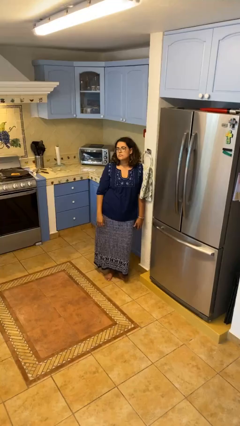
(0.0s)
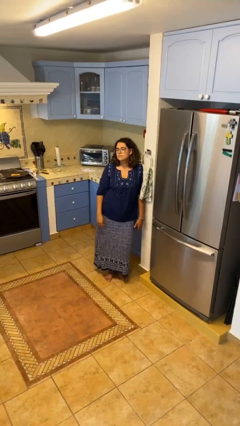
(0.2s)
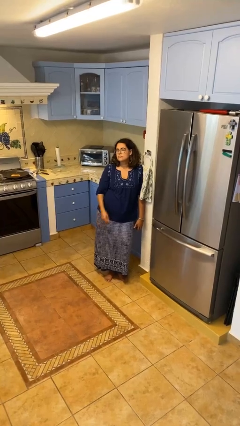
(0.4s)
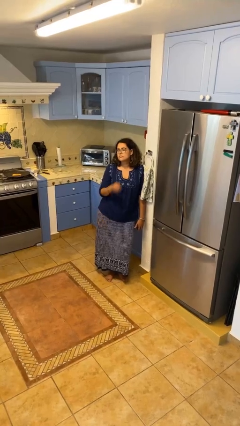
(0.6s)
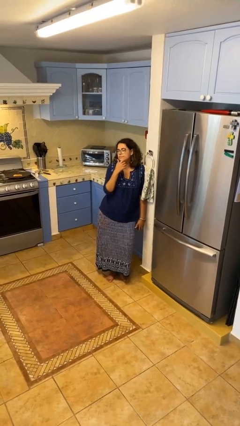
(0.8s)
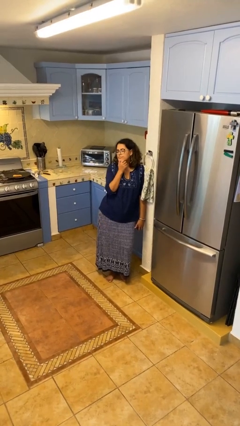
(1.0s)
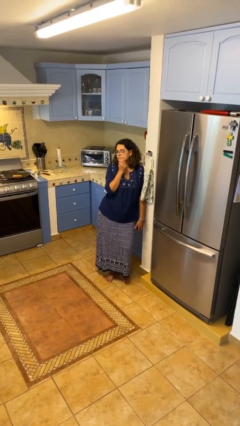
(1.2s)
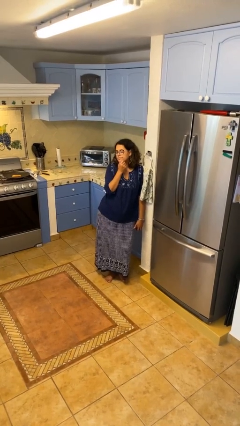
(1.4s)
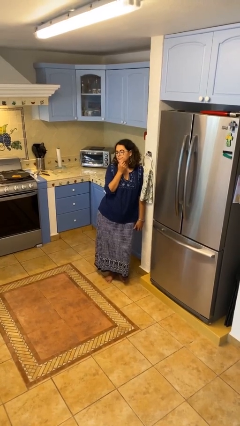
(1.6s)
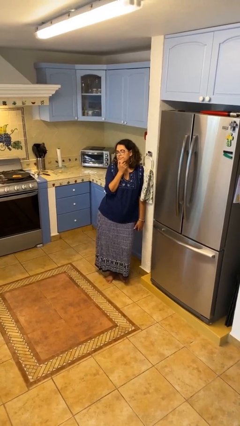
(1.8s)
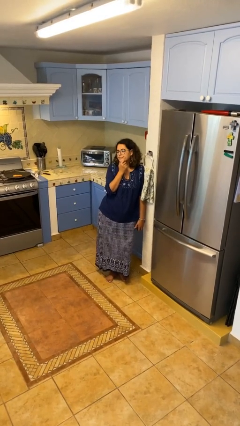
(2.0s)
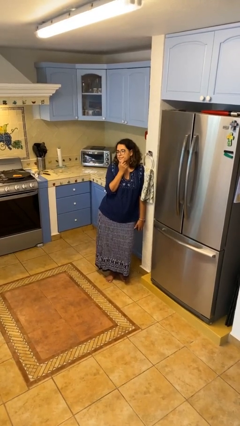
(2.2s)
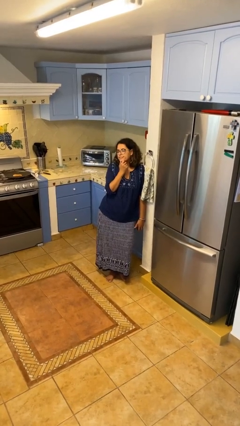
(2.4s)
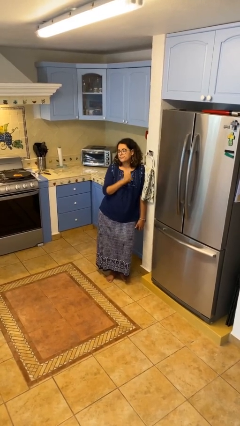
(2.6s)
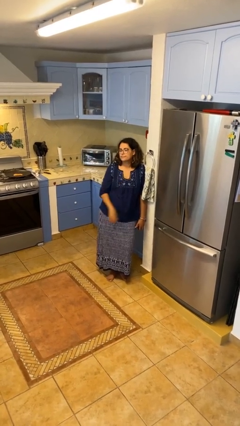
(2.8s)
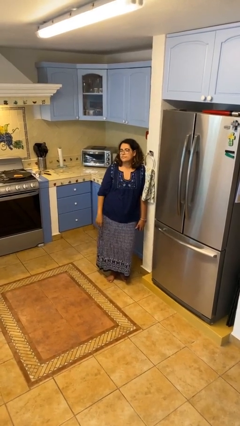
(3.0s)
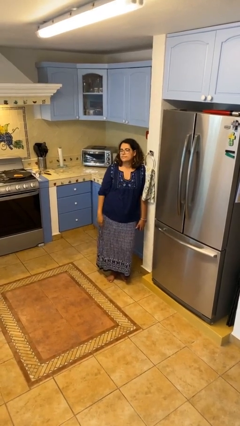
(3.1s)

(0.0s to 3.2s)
person strokes chin

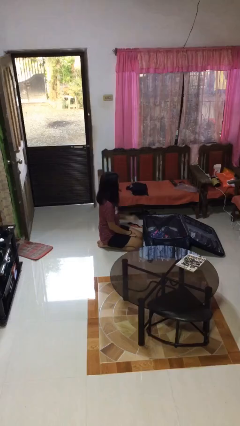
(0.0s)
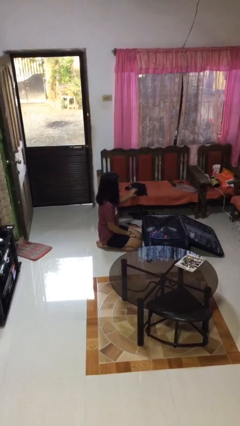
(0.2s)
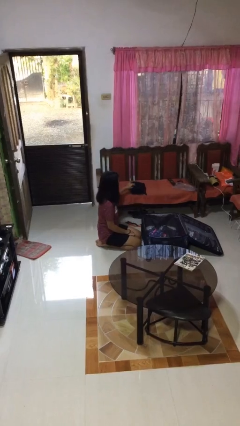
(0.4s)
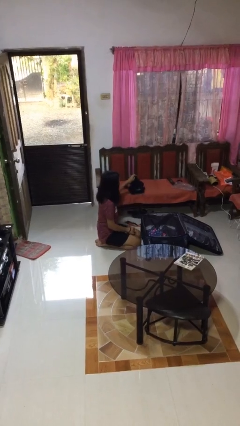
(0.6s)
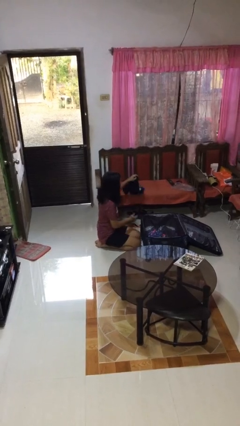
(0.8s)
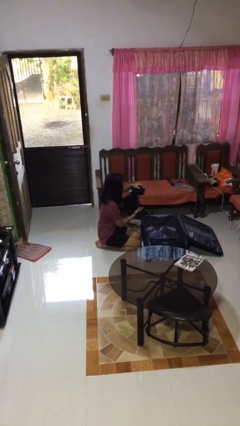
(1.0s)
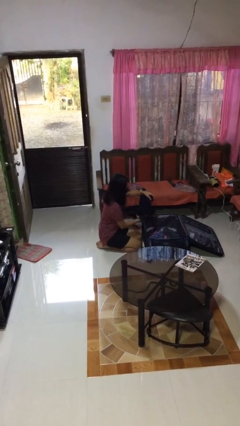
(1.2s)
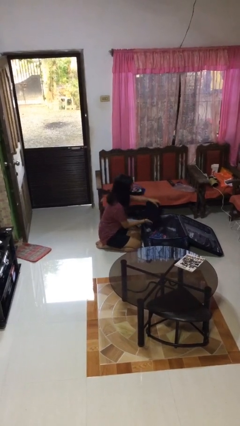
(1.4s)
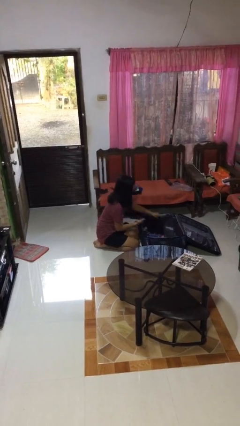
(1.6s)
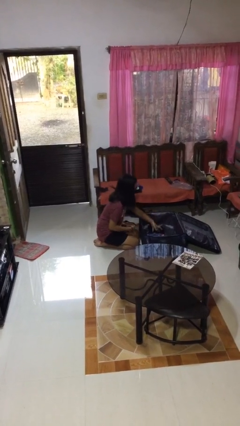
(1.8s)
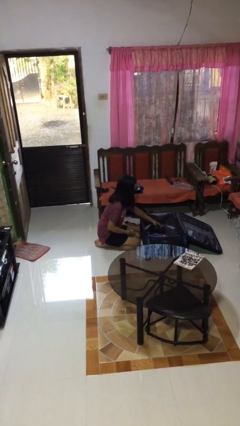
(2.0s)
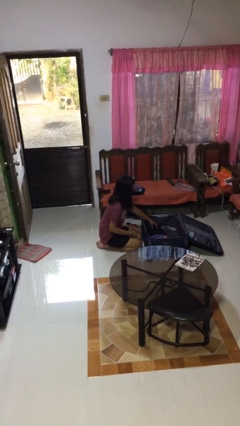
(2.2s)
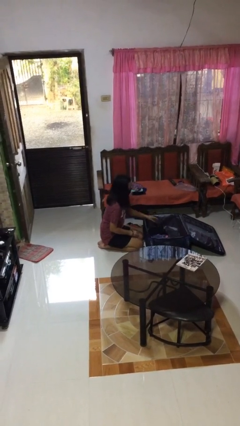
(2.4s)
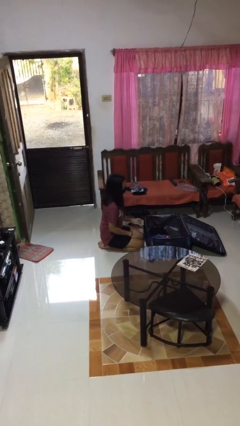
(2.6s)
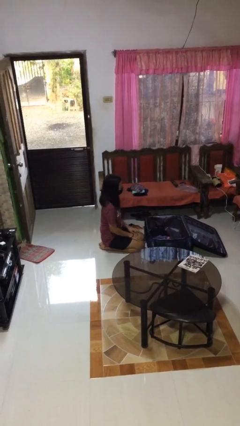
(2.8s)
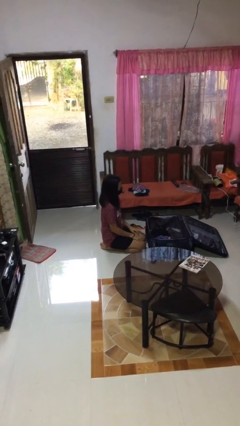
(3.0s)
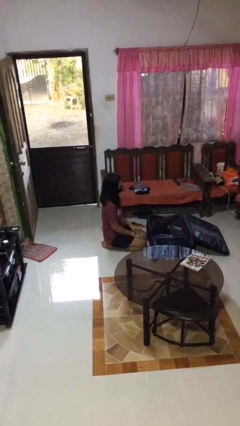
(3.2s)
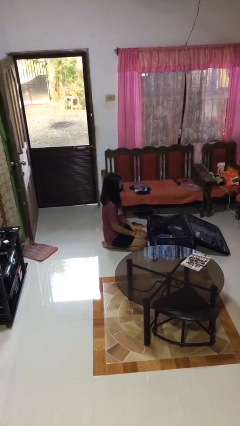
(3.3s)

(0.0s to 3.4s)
person loads clothes into suitcase

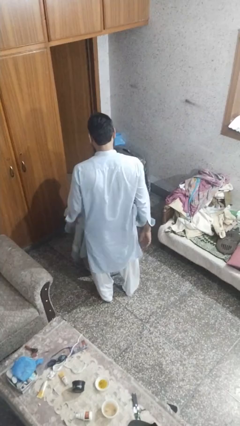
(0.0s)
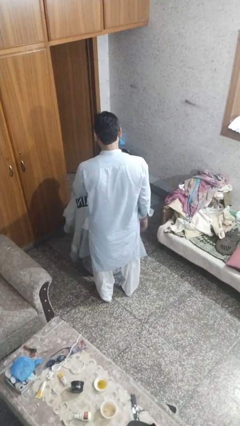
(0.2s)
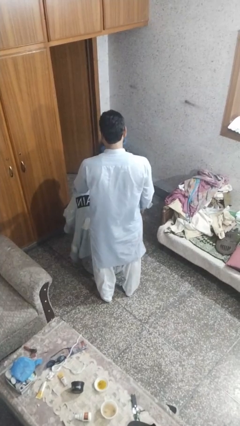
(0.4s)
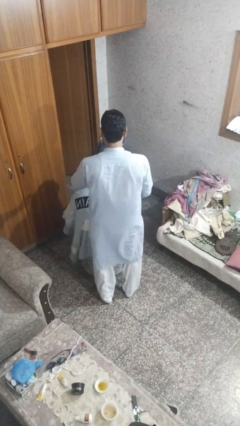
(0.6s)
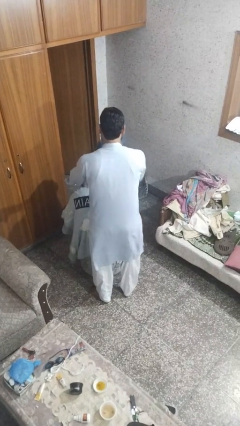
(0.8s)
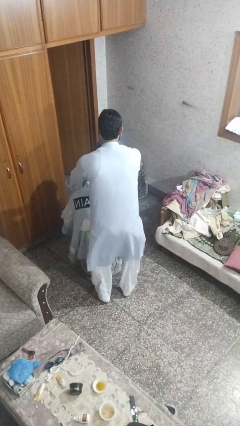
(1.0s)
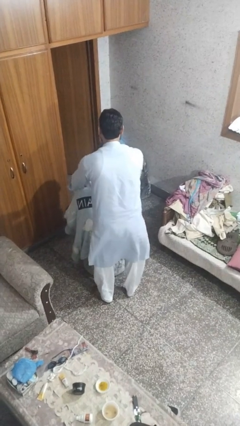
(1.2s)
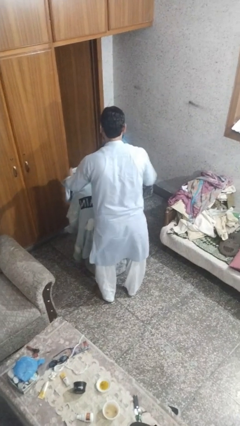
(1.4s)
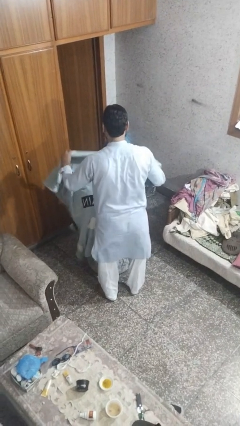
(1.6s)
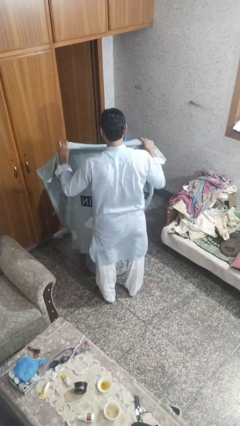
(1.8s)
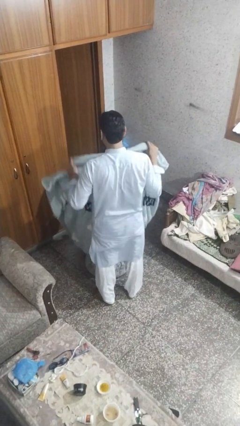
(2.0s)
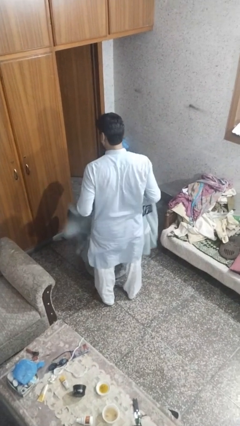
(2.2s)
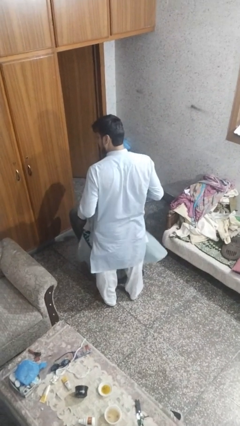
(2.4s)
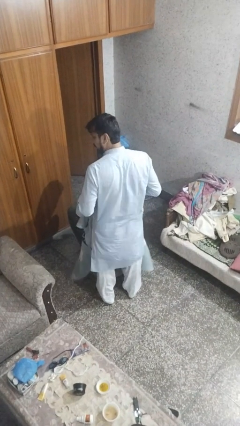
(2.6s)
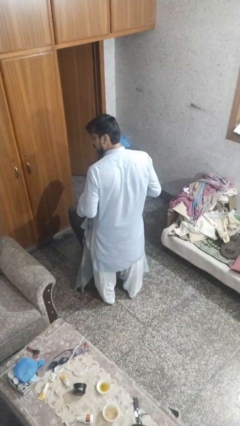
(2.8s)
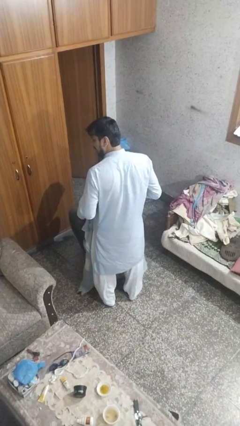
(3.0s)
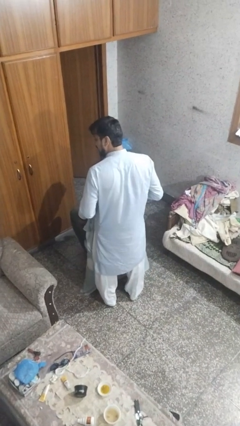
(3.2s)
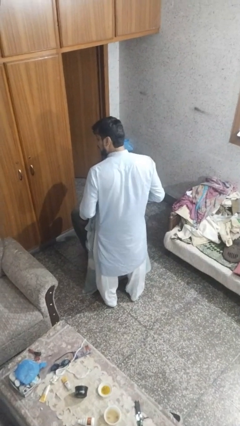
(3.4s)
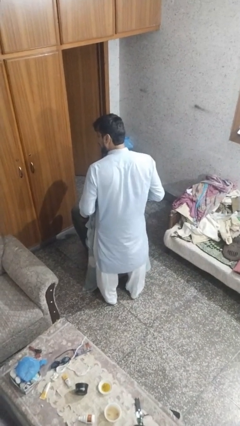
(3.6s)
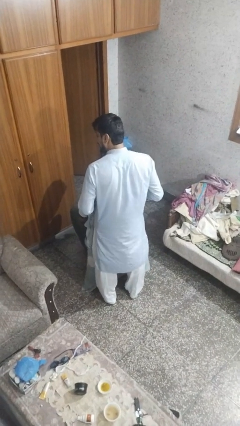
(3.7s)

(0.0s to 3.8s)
person uncovers friend with blanket

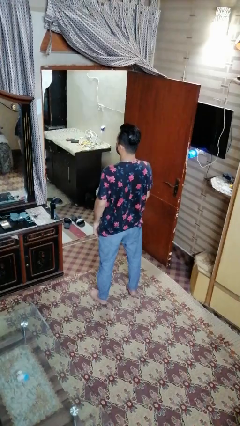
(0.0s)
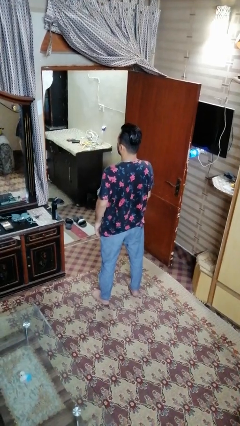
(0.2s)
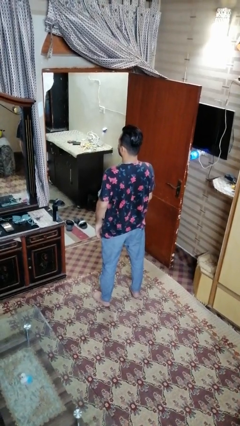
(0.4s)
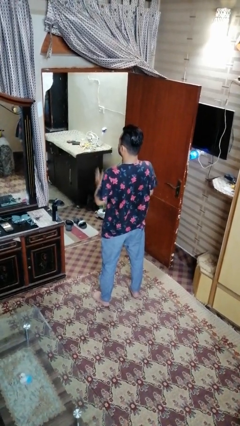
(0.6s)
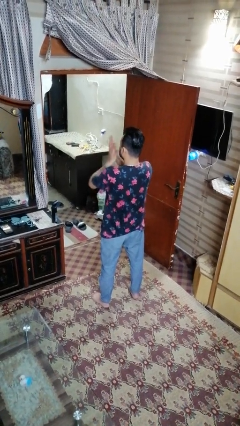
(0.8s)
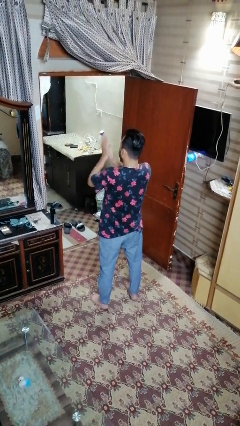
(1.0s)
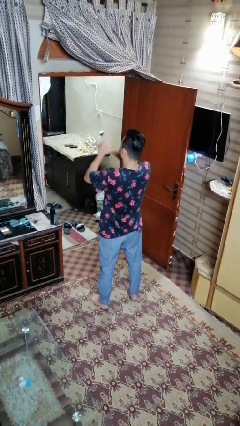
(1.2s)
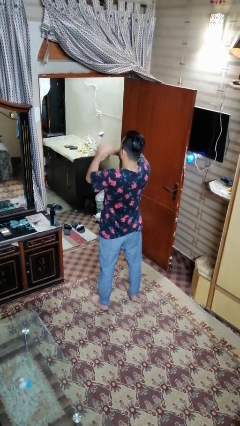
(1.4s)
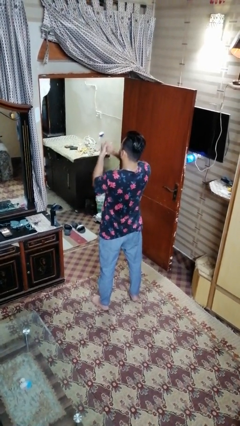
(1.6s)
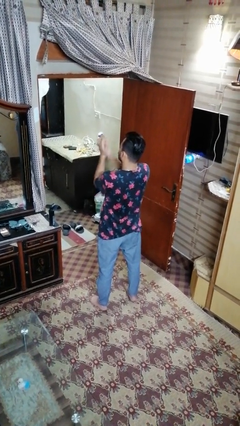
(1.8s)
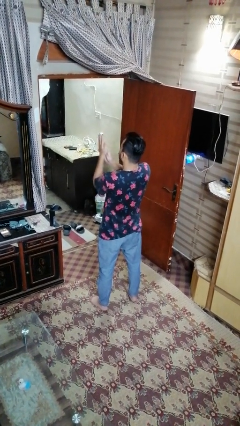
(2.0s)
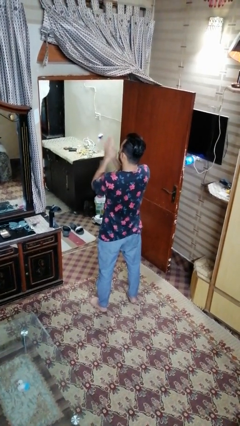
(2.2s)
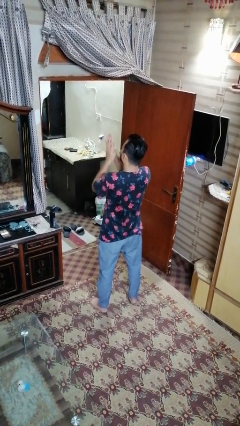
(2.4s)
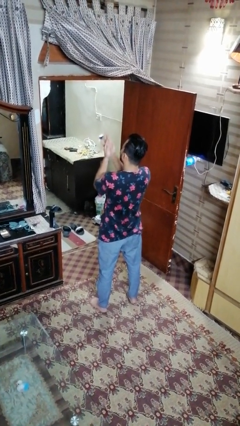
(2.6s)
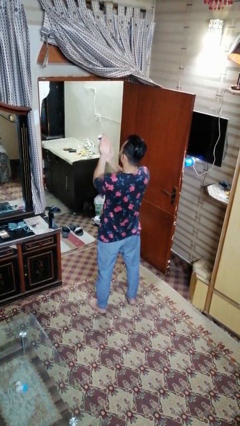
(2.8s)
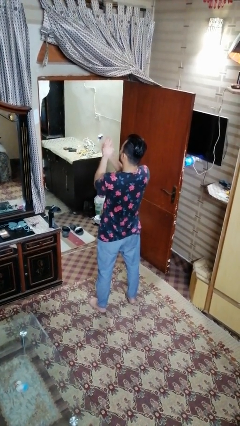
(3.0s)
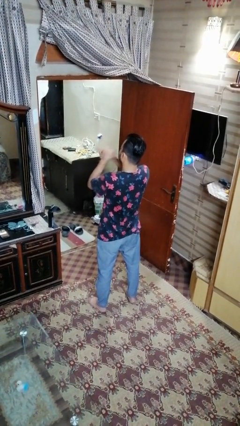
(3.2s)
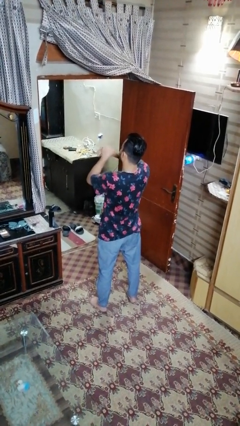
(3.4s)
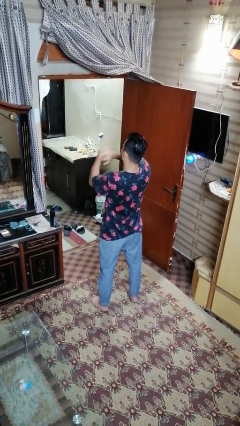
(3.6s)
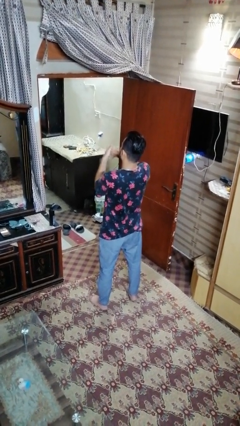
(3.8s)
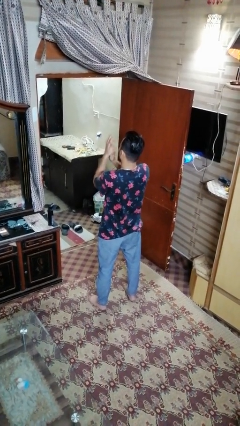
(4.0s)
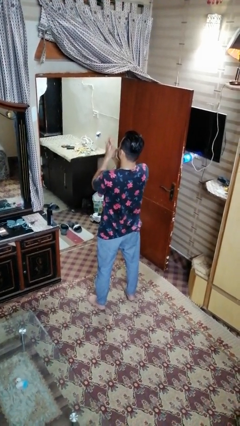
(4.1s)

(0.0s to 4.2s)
person blows into hands

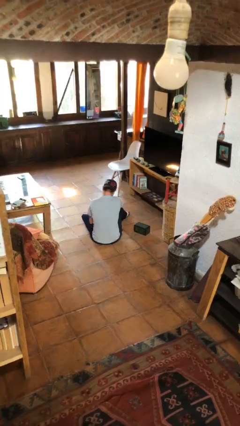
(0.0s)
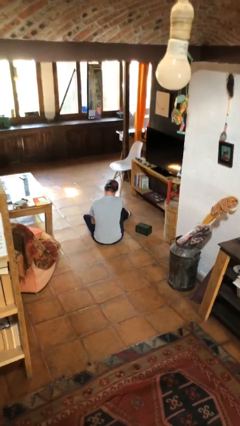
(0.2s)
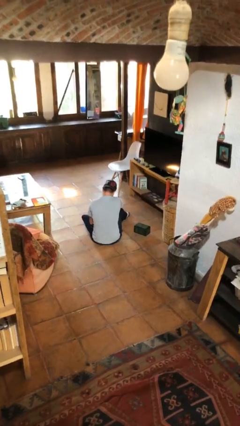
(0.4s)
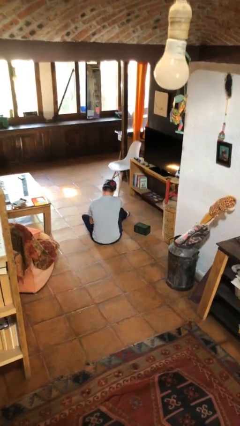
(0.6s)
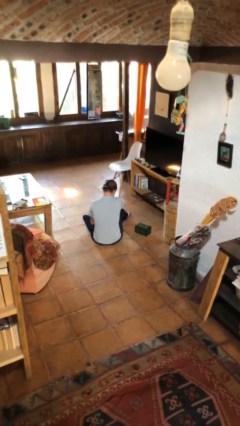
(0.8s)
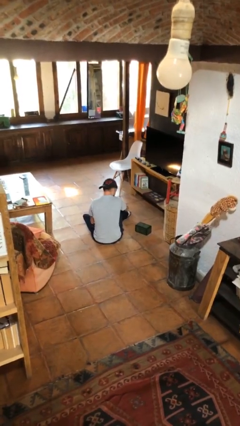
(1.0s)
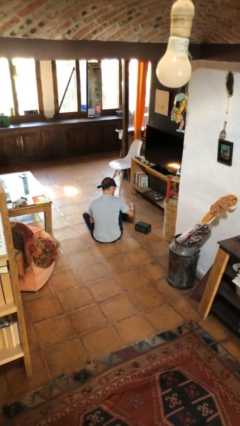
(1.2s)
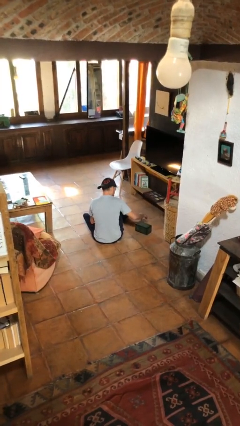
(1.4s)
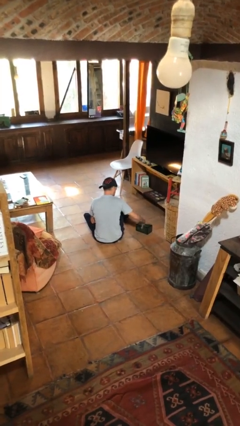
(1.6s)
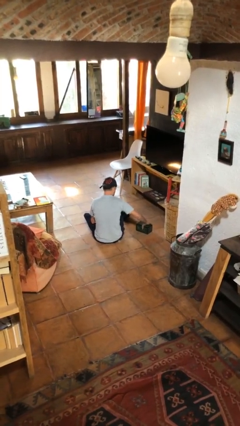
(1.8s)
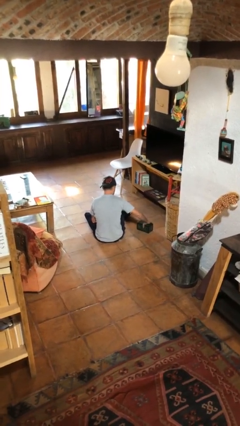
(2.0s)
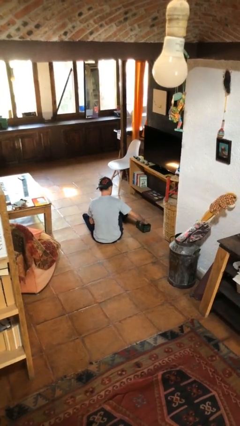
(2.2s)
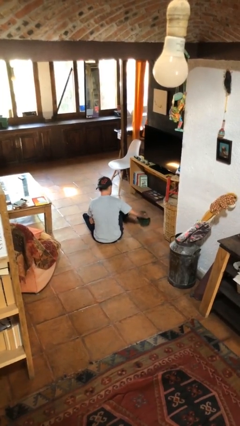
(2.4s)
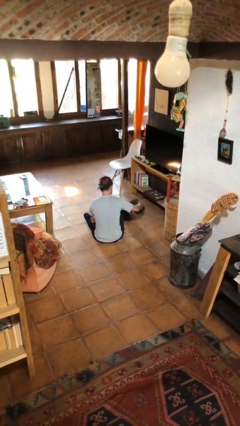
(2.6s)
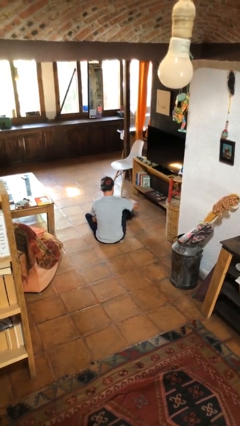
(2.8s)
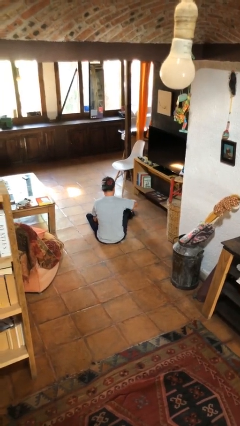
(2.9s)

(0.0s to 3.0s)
person picks up object from floor
